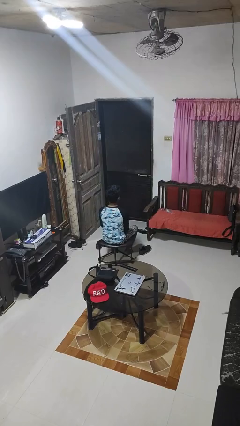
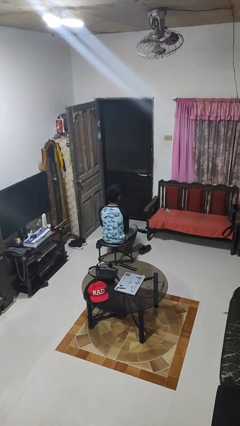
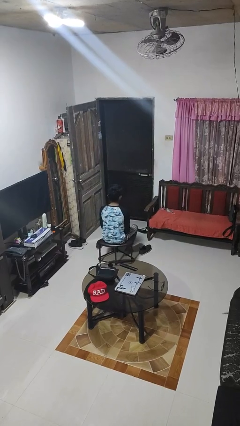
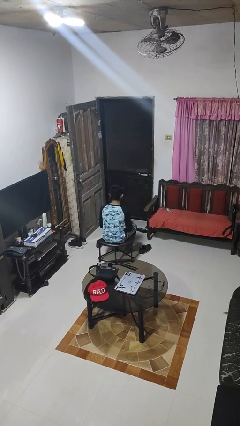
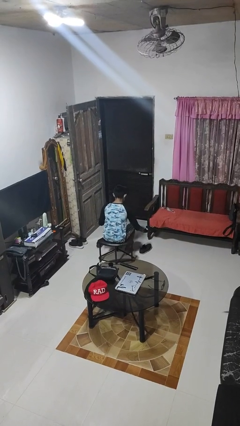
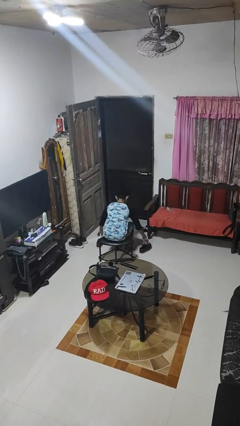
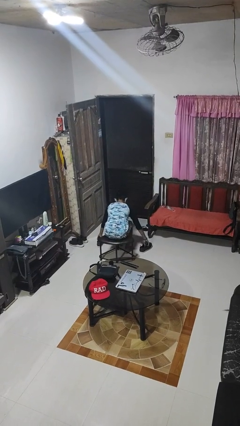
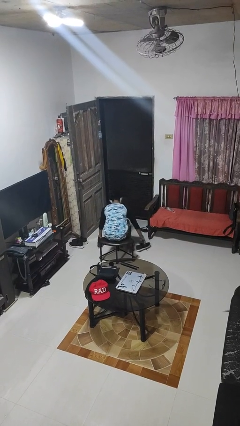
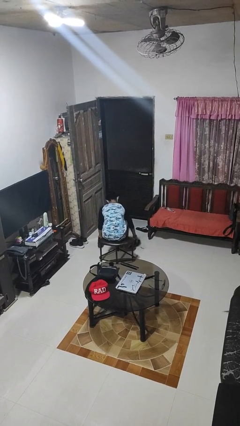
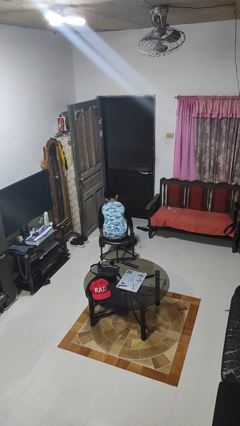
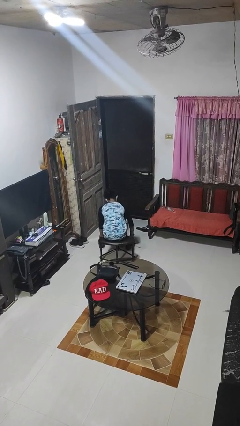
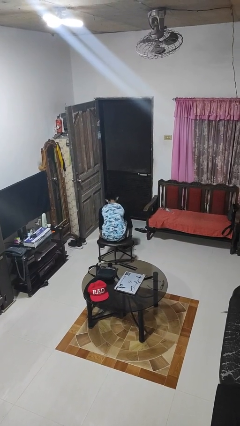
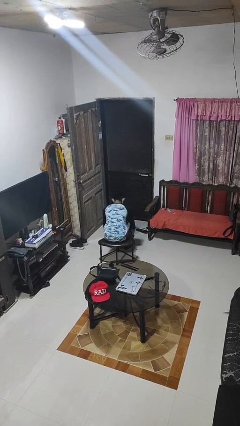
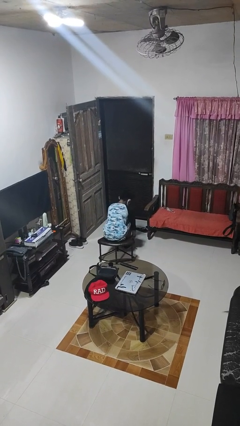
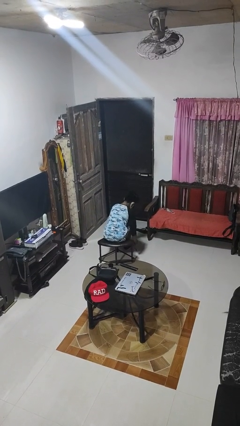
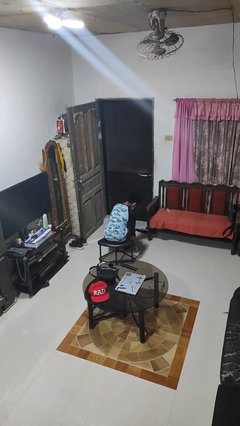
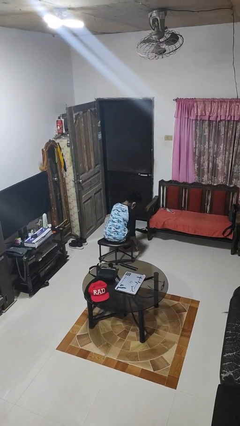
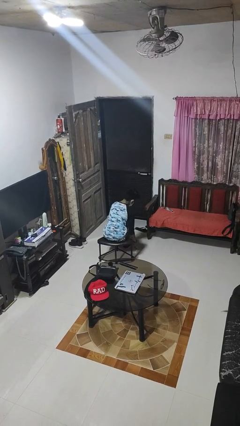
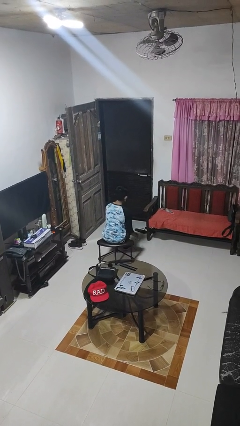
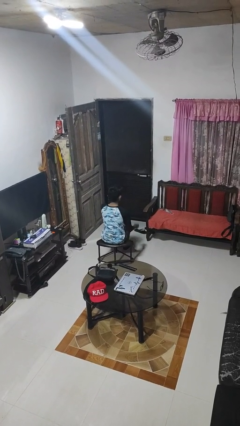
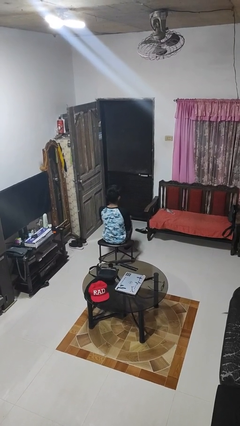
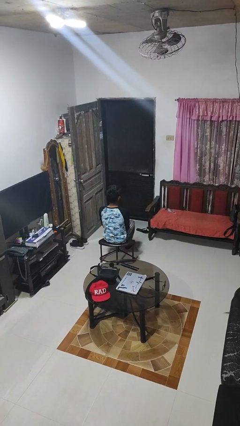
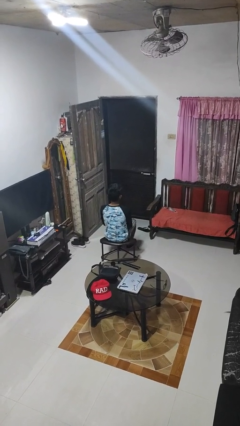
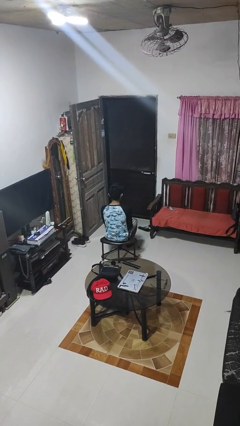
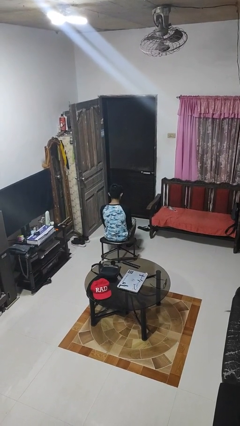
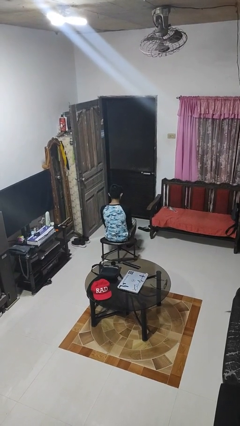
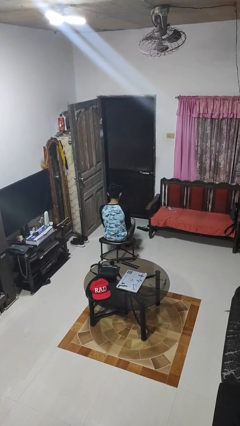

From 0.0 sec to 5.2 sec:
person puts on gloves

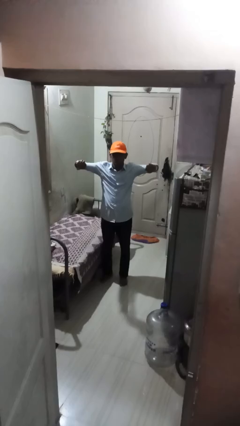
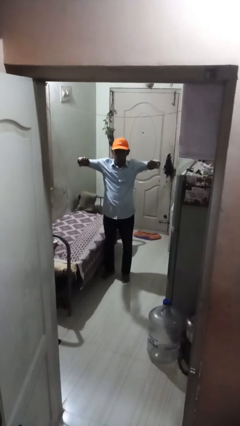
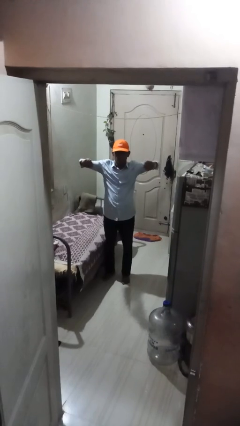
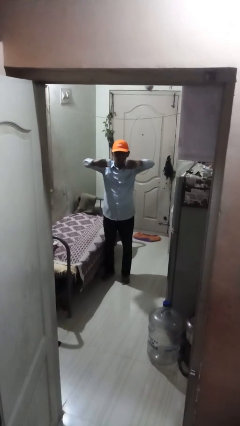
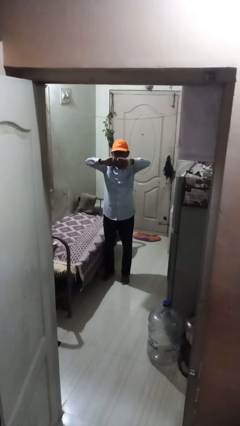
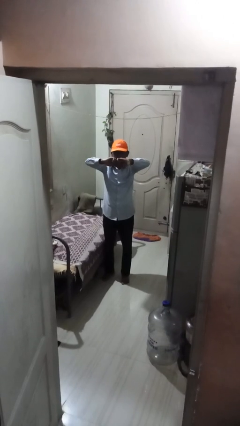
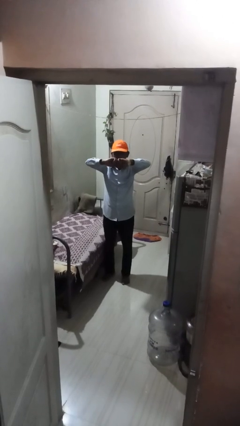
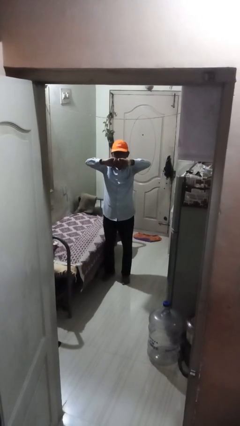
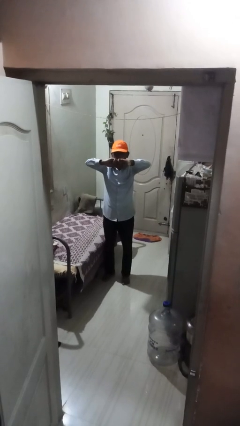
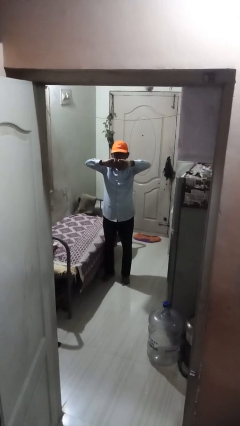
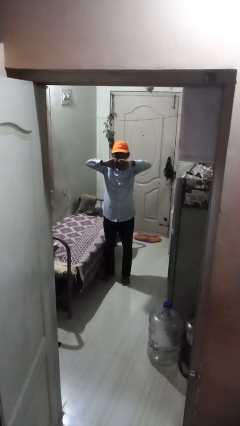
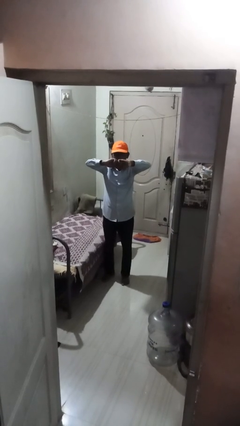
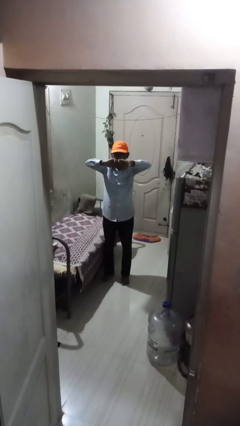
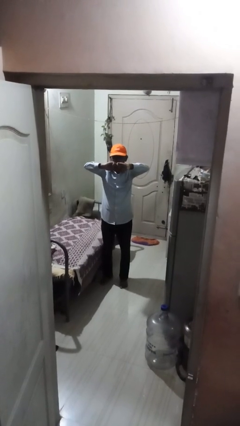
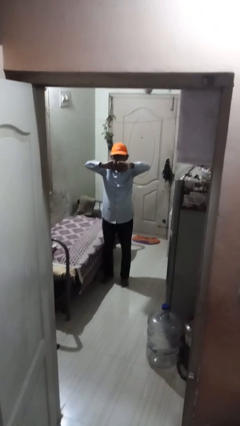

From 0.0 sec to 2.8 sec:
person gestures zoom in

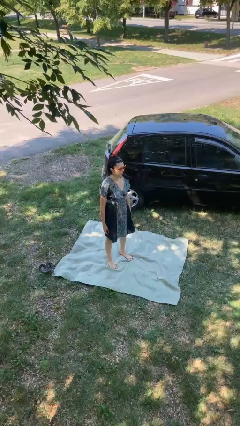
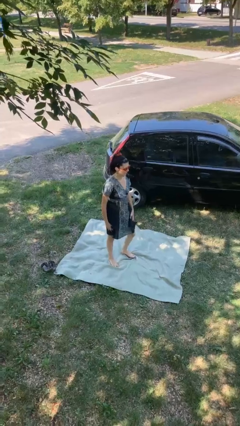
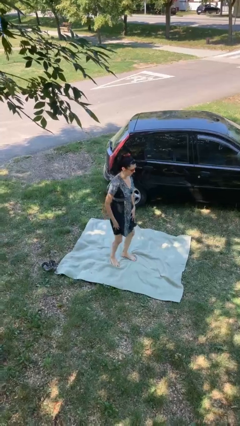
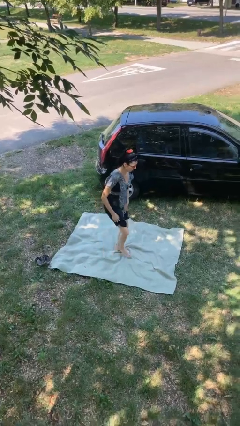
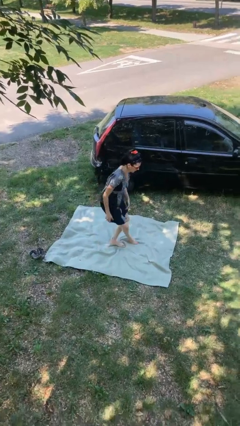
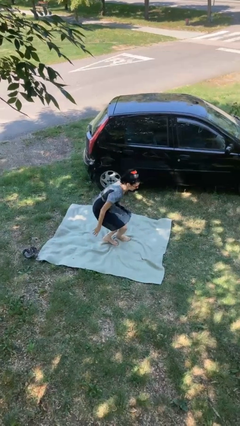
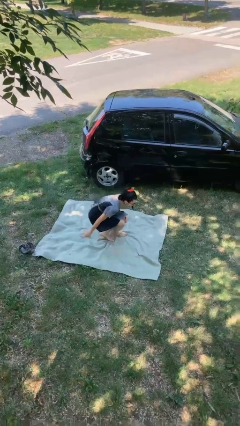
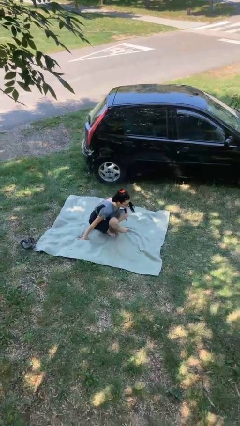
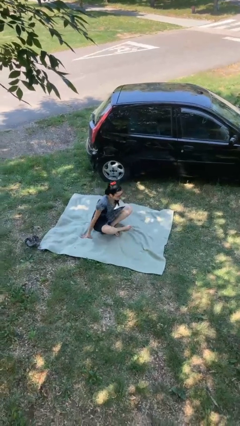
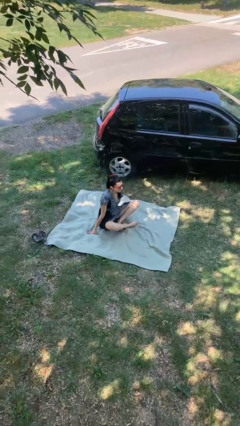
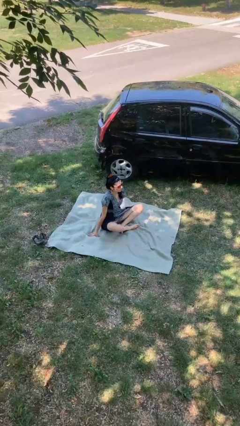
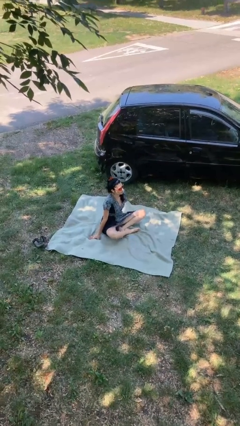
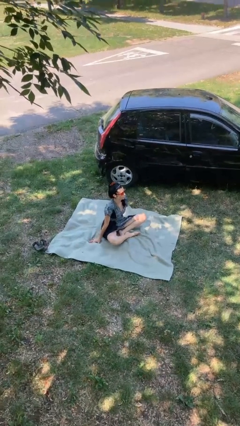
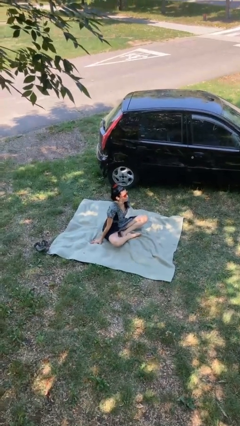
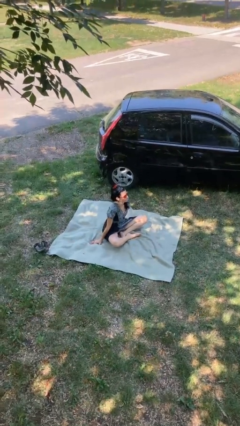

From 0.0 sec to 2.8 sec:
person sits crisscross

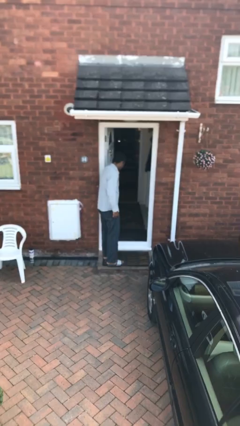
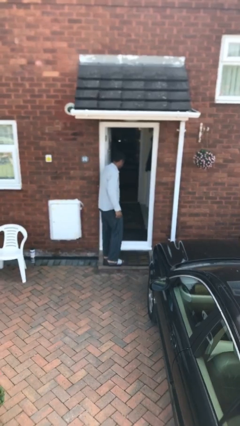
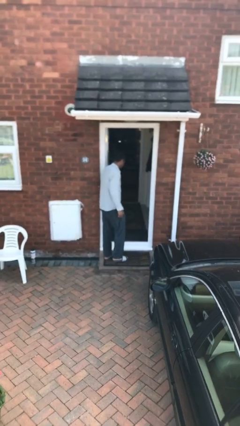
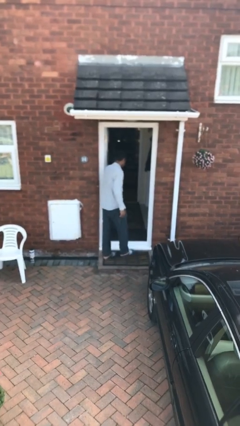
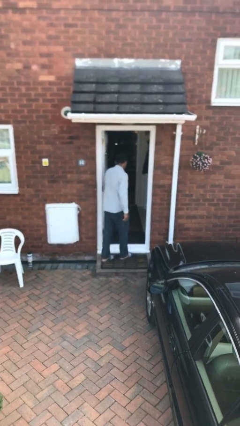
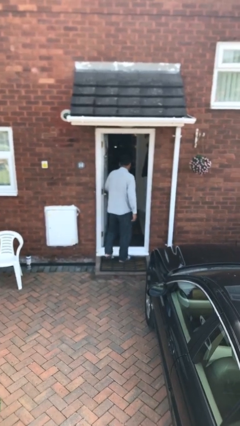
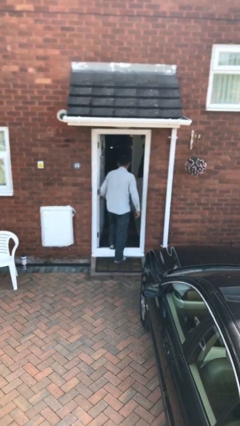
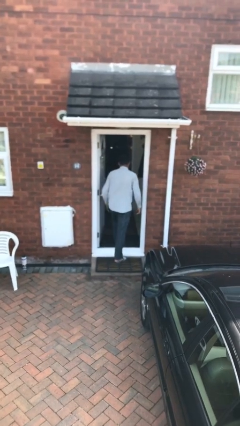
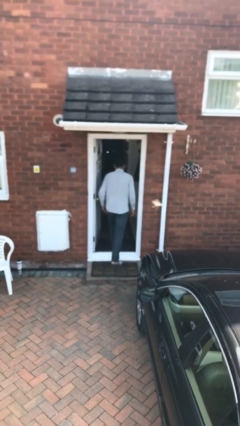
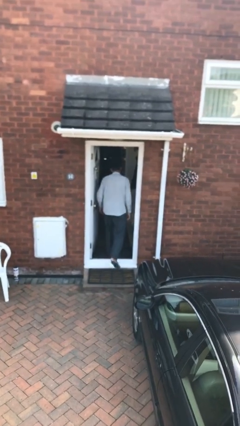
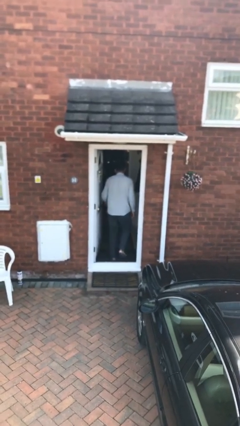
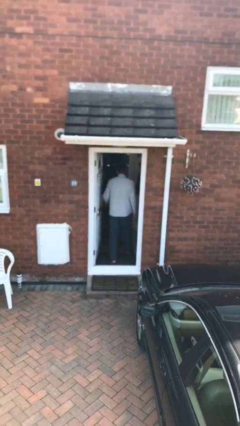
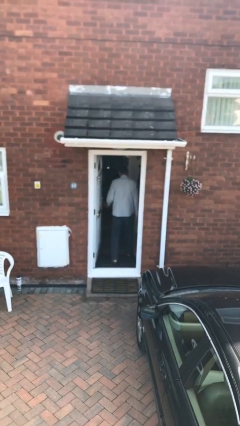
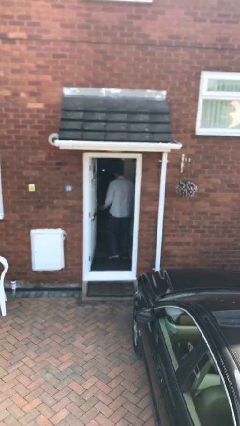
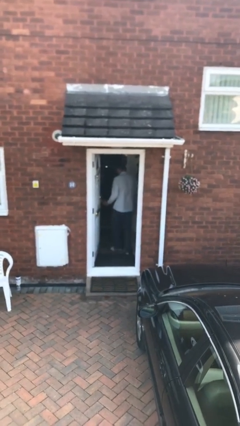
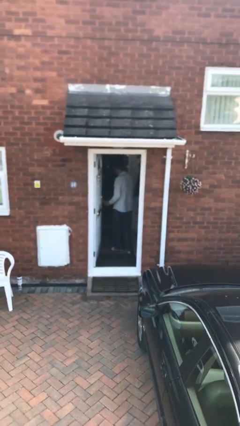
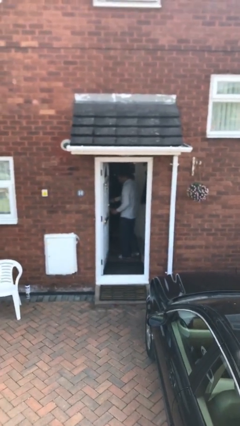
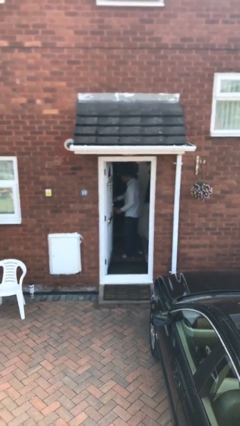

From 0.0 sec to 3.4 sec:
person exits scene through structure

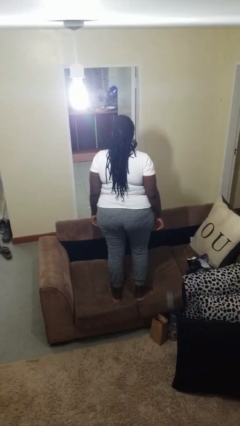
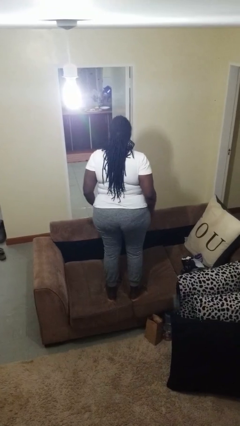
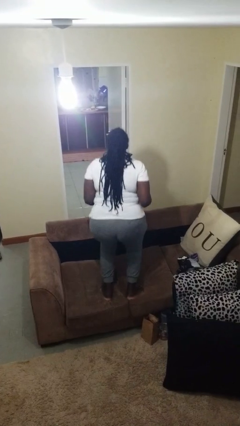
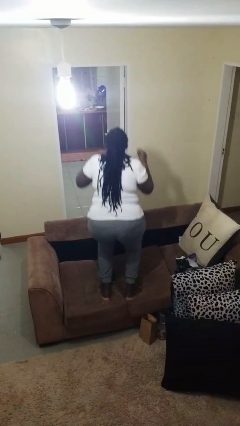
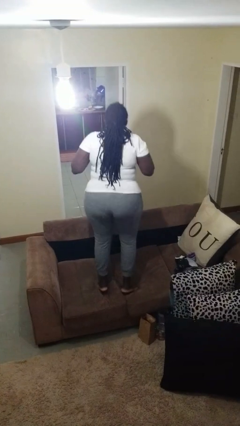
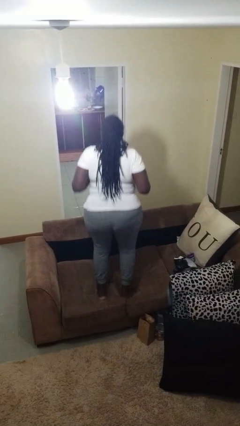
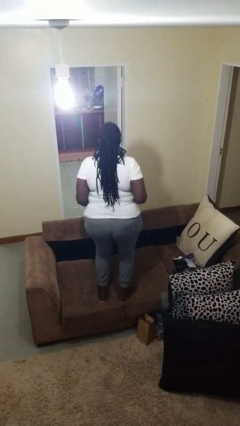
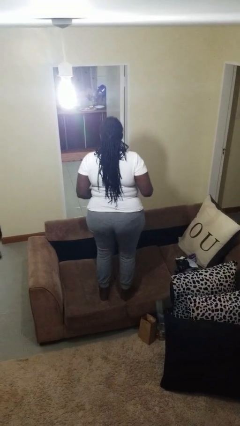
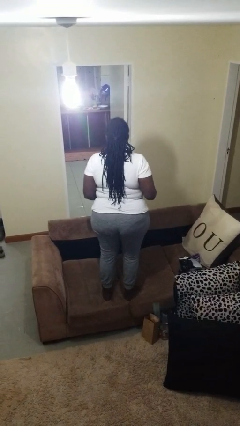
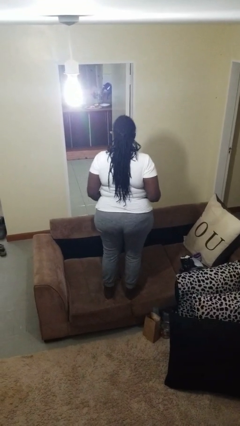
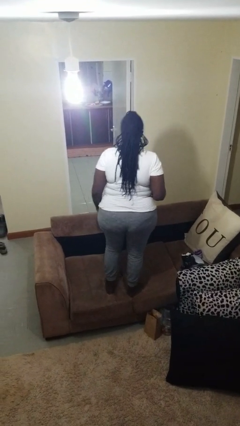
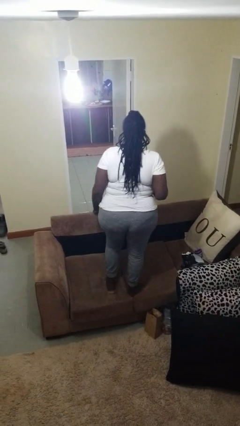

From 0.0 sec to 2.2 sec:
person jumps on couch

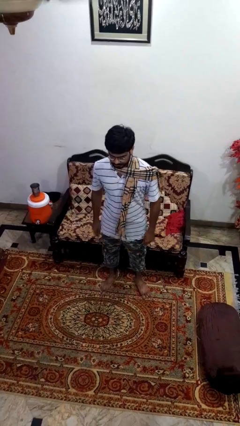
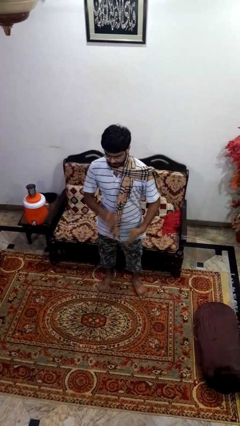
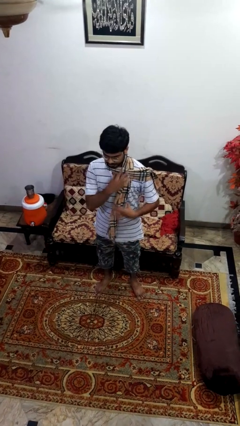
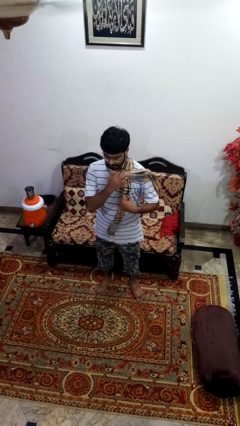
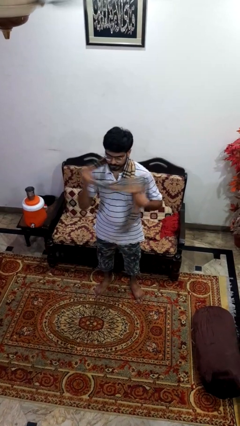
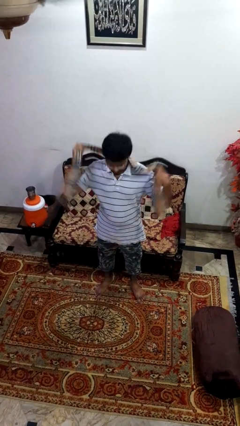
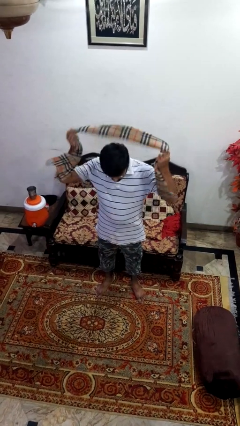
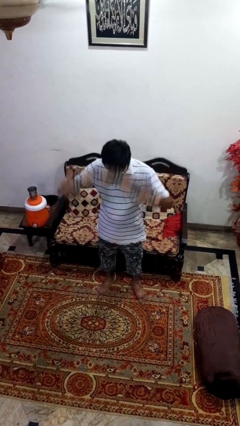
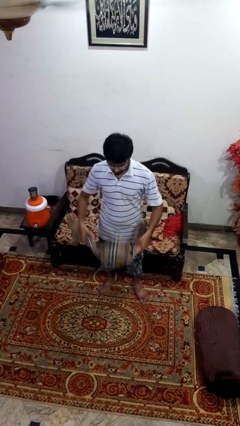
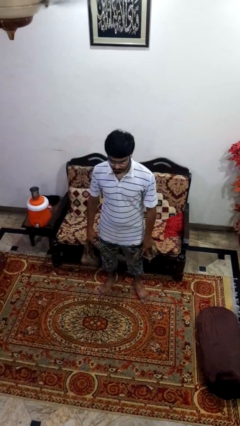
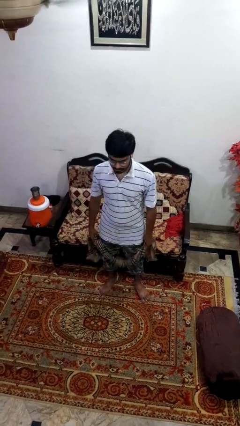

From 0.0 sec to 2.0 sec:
person takes off scarf
